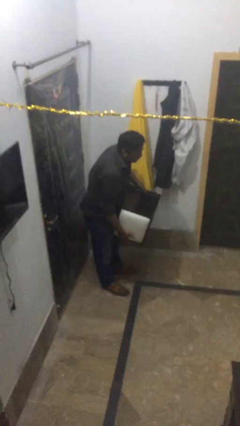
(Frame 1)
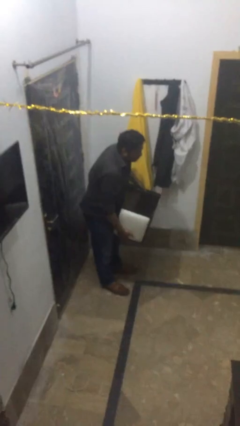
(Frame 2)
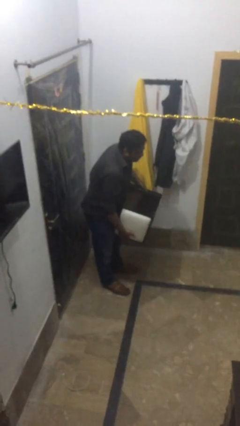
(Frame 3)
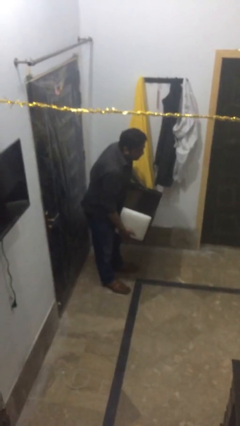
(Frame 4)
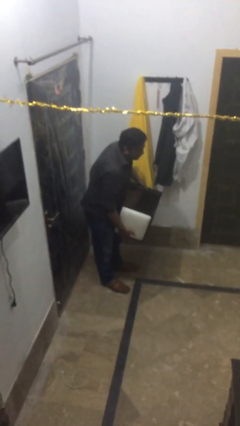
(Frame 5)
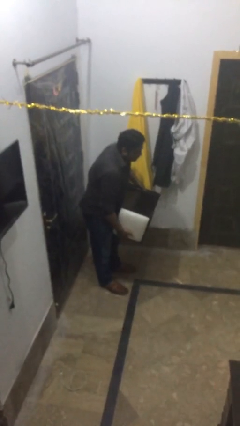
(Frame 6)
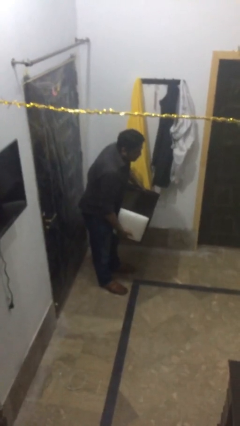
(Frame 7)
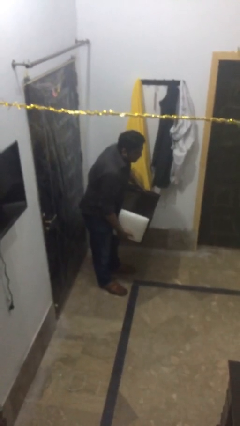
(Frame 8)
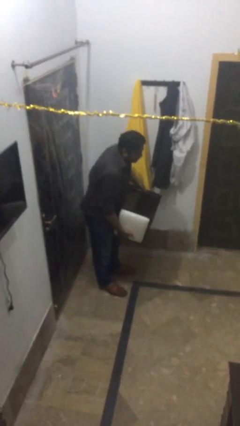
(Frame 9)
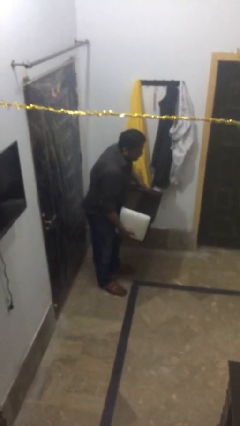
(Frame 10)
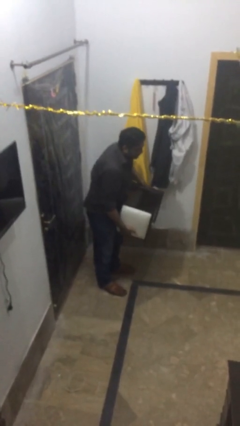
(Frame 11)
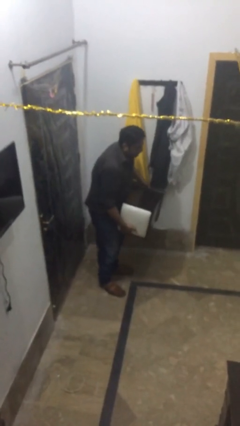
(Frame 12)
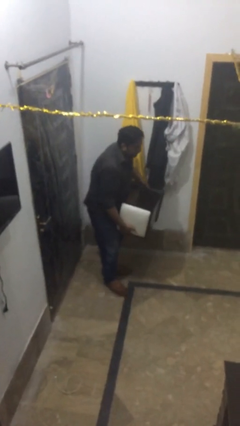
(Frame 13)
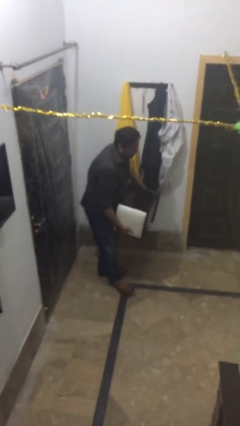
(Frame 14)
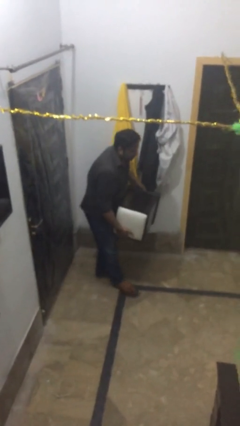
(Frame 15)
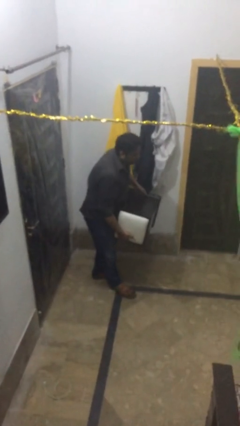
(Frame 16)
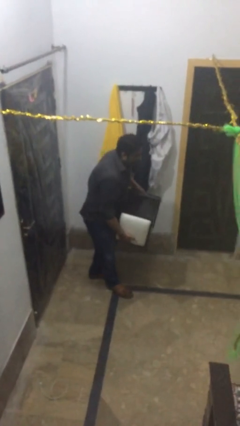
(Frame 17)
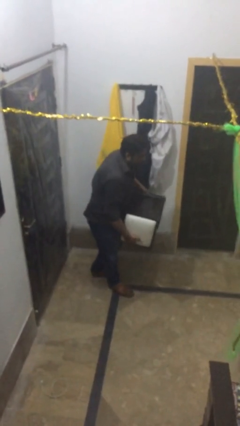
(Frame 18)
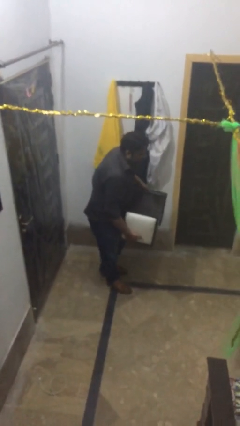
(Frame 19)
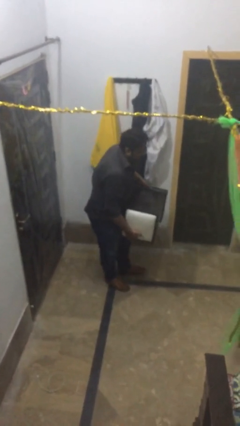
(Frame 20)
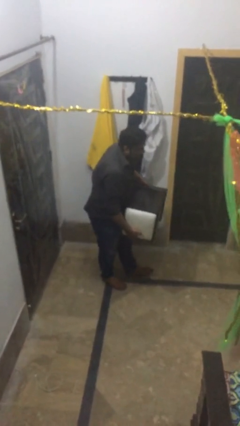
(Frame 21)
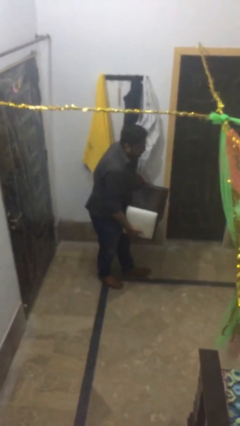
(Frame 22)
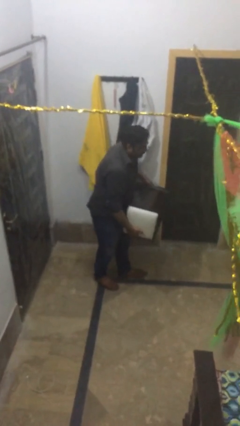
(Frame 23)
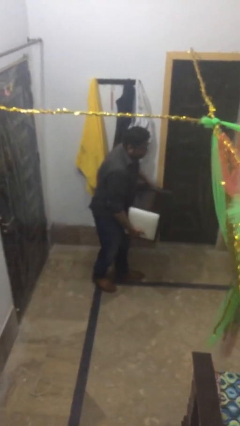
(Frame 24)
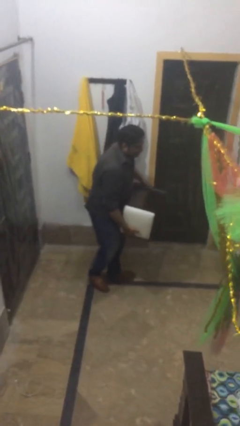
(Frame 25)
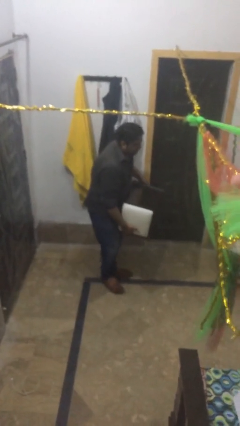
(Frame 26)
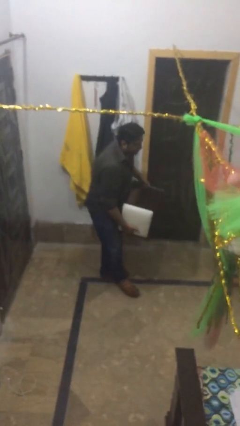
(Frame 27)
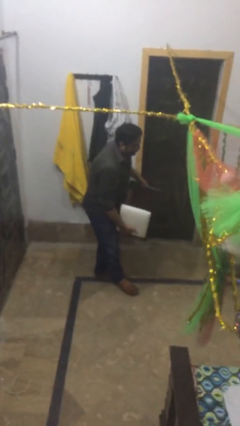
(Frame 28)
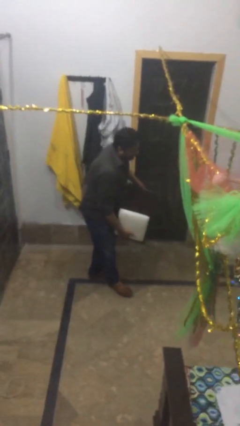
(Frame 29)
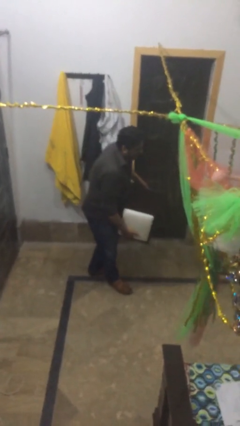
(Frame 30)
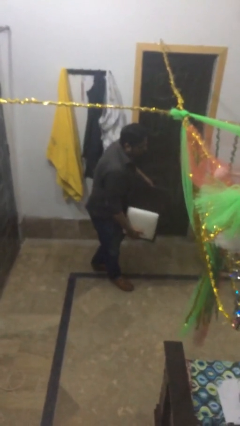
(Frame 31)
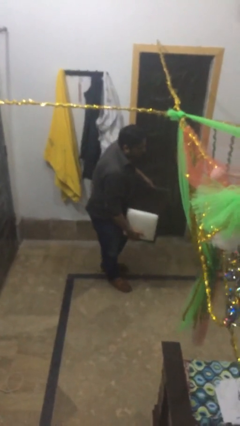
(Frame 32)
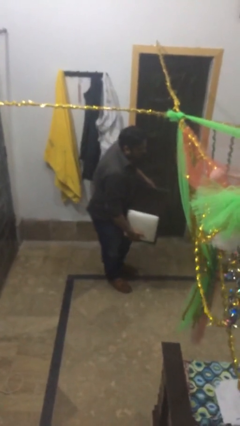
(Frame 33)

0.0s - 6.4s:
person carries heavy object

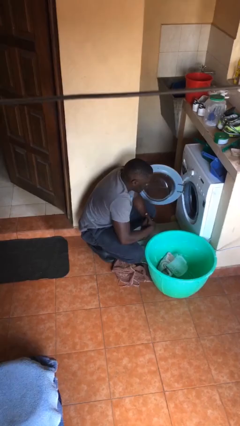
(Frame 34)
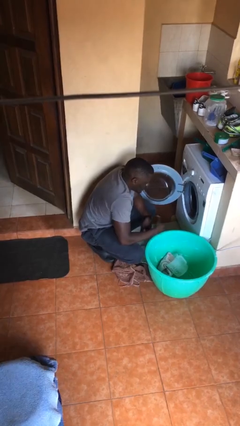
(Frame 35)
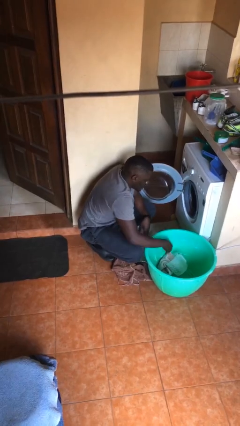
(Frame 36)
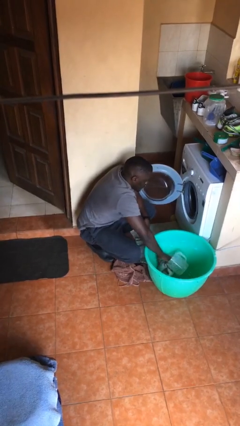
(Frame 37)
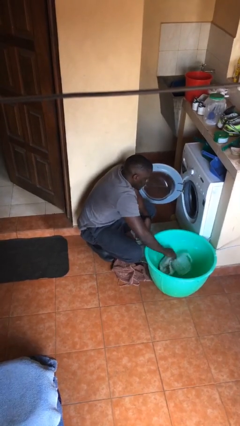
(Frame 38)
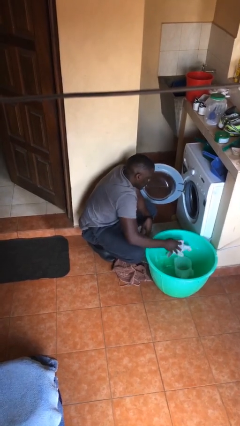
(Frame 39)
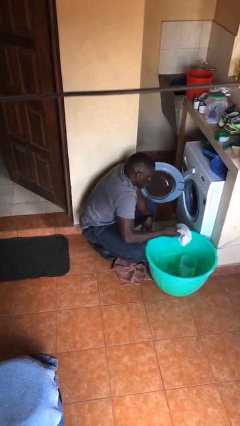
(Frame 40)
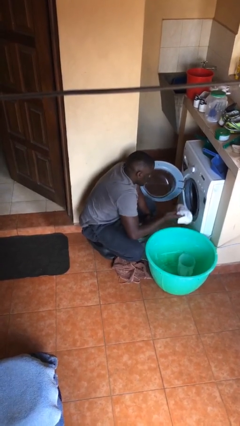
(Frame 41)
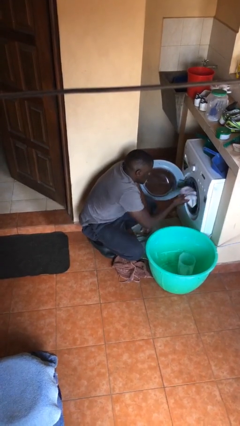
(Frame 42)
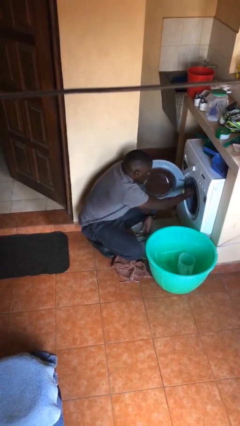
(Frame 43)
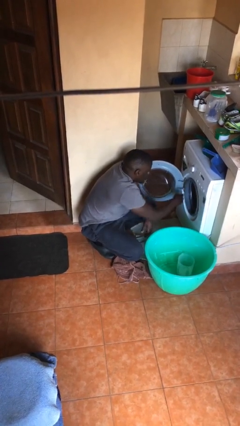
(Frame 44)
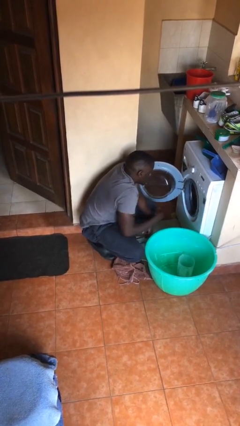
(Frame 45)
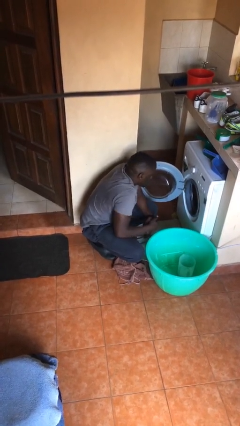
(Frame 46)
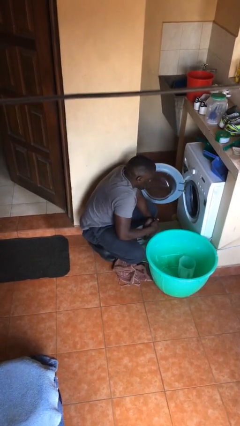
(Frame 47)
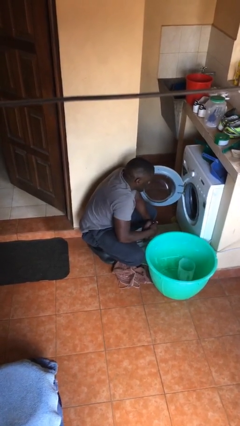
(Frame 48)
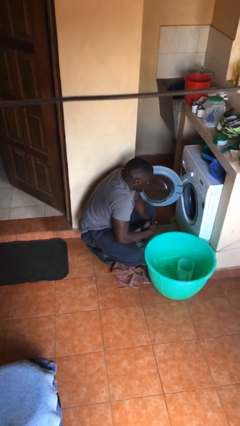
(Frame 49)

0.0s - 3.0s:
person loads clotheswasher

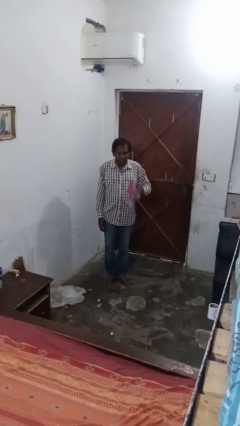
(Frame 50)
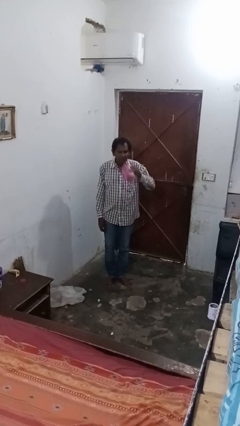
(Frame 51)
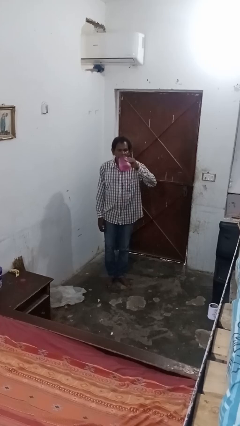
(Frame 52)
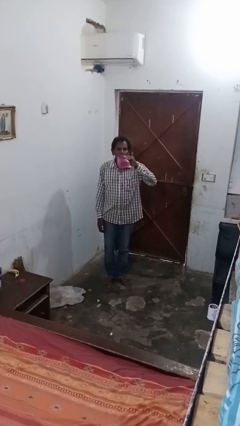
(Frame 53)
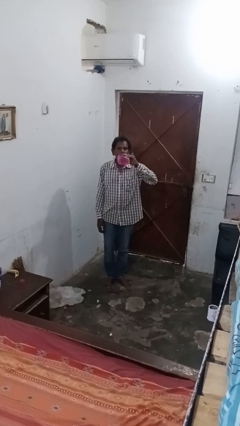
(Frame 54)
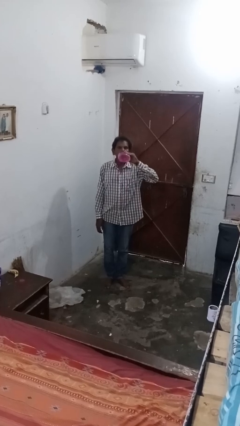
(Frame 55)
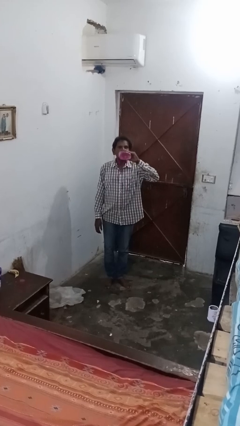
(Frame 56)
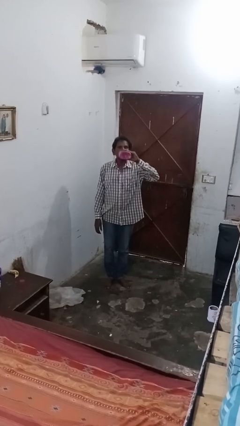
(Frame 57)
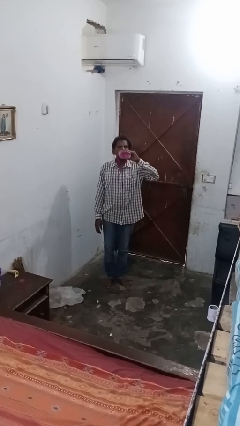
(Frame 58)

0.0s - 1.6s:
person drinks from bottle

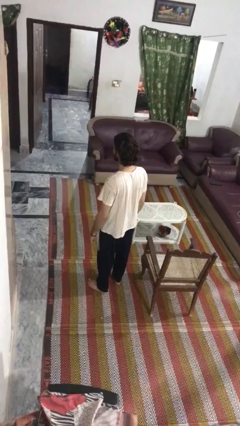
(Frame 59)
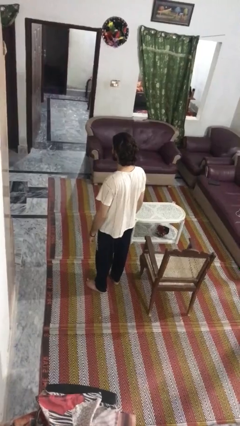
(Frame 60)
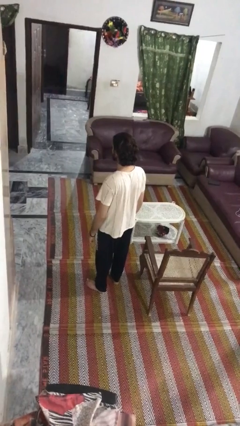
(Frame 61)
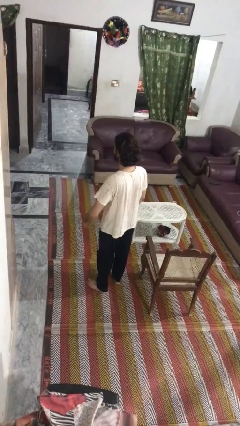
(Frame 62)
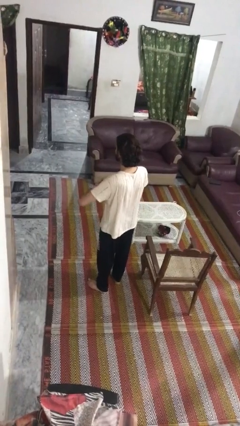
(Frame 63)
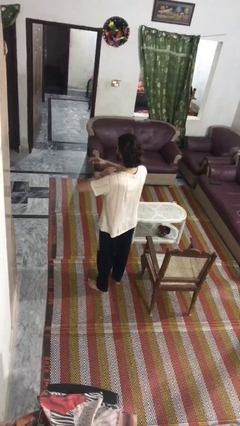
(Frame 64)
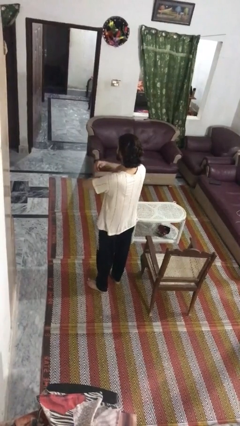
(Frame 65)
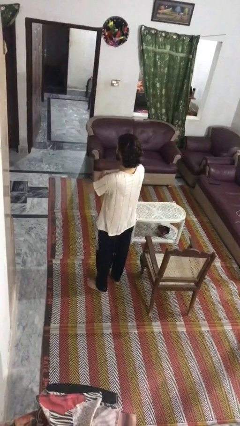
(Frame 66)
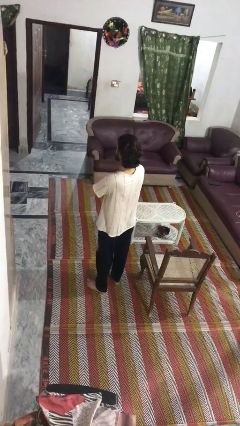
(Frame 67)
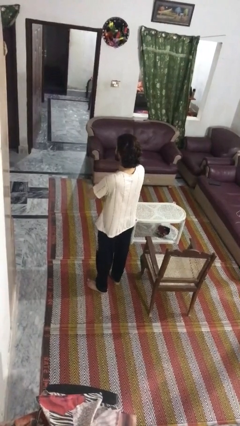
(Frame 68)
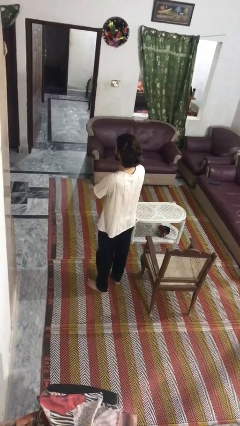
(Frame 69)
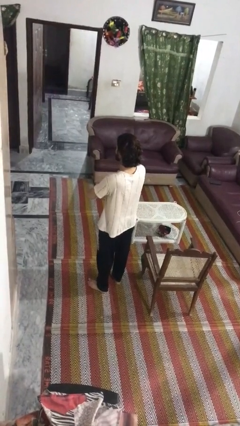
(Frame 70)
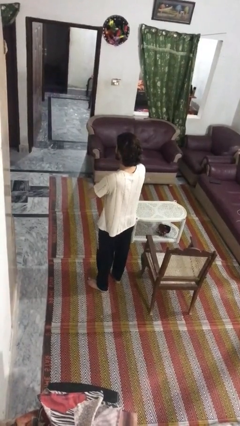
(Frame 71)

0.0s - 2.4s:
person crosses arms

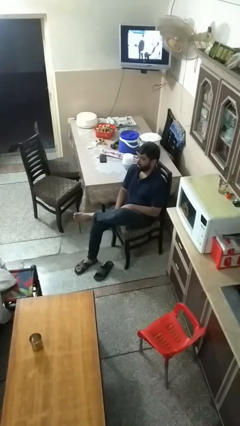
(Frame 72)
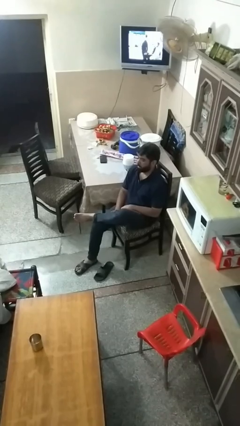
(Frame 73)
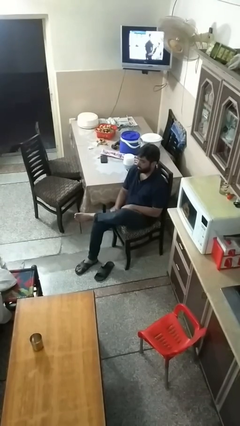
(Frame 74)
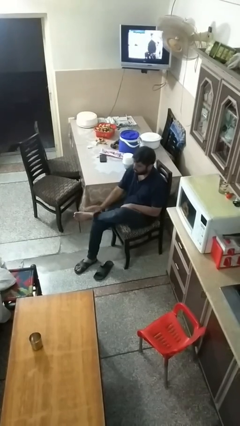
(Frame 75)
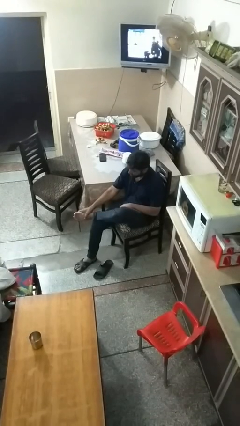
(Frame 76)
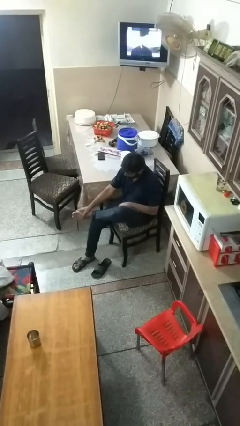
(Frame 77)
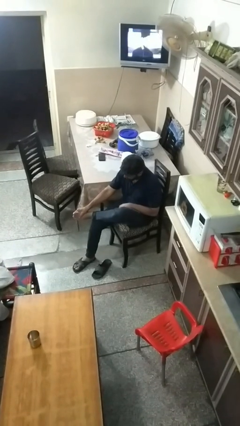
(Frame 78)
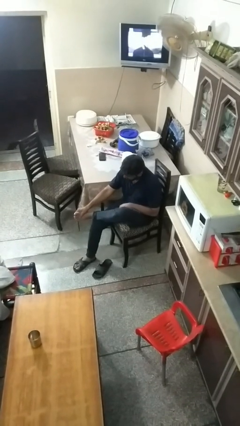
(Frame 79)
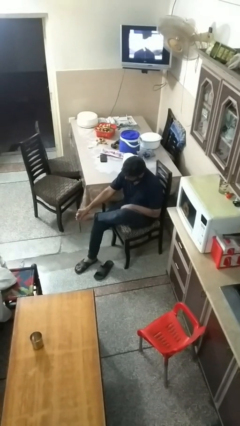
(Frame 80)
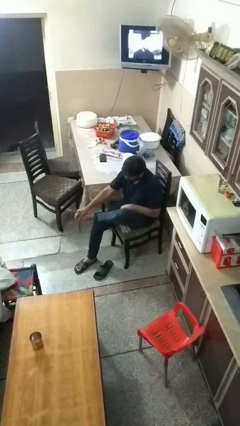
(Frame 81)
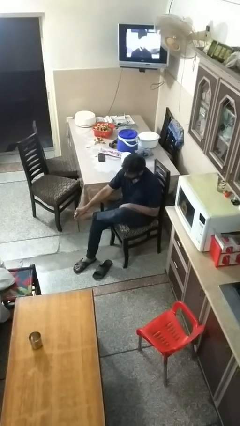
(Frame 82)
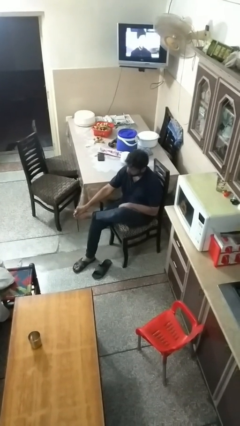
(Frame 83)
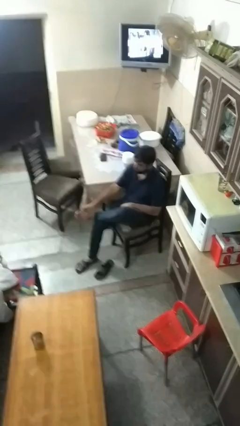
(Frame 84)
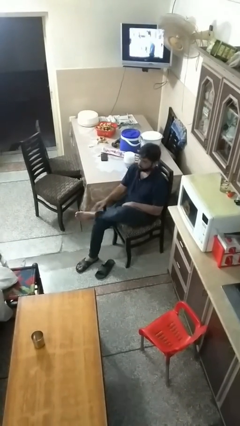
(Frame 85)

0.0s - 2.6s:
person rubs foot

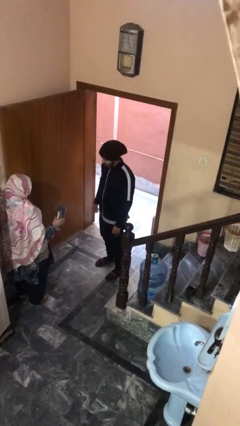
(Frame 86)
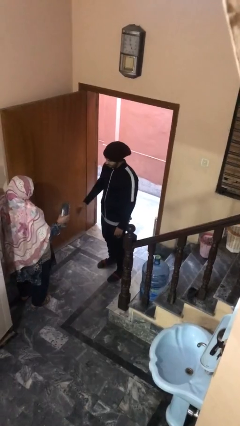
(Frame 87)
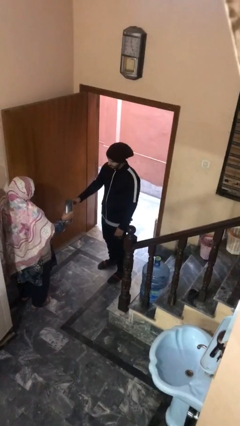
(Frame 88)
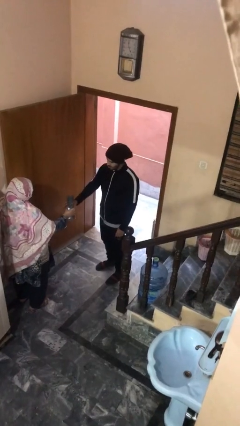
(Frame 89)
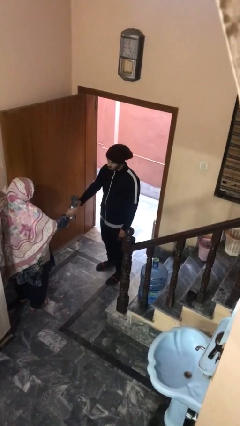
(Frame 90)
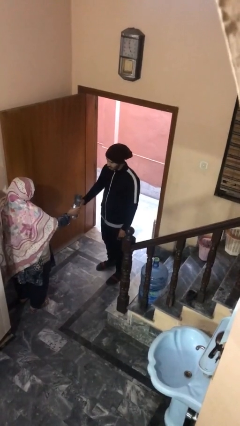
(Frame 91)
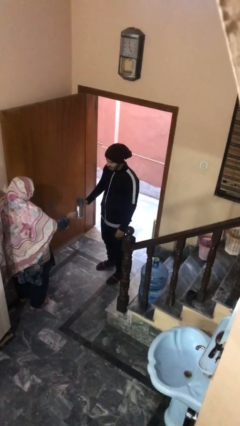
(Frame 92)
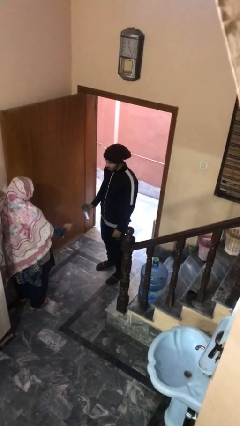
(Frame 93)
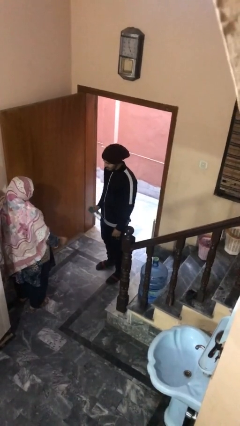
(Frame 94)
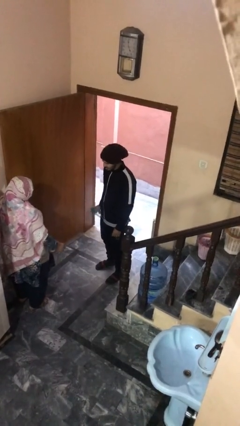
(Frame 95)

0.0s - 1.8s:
person transfers object to person
